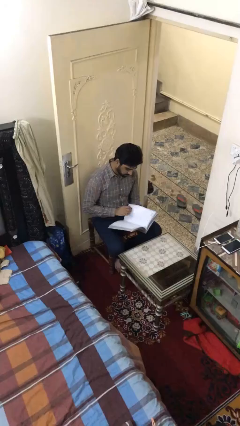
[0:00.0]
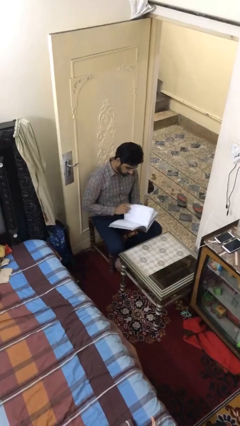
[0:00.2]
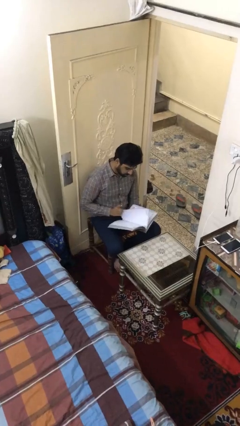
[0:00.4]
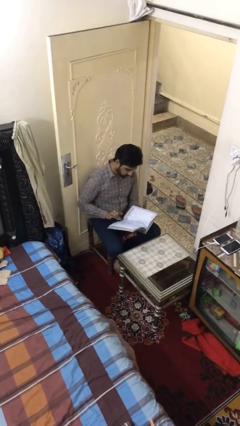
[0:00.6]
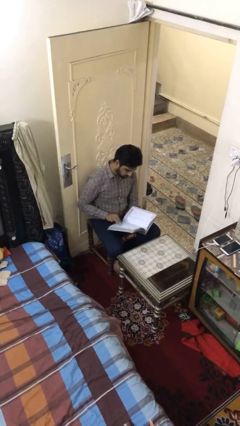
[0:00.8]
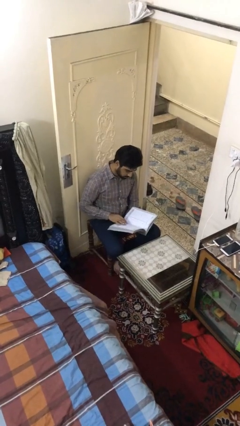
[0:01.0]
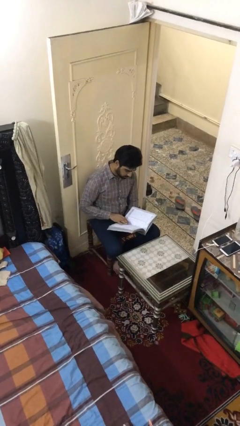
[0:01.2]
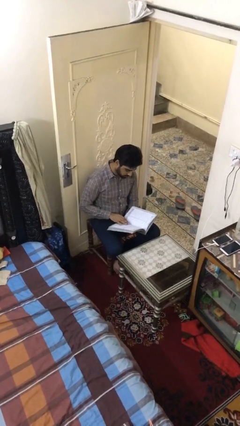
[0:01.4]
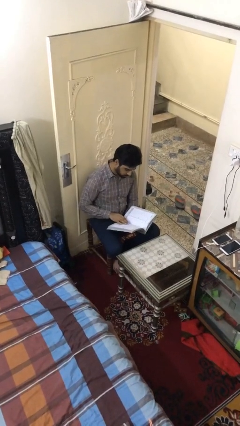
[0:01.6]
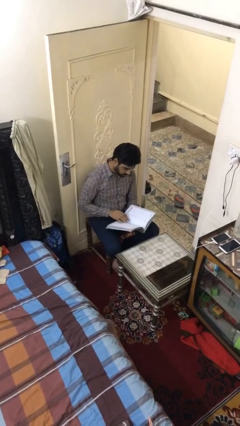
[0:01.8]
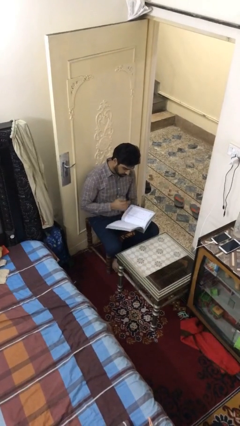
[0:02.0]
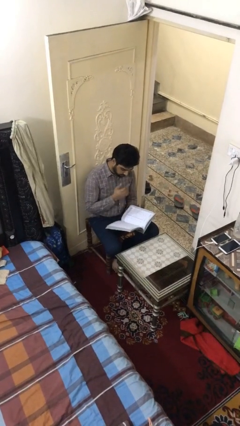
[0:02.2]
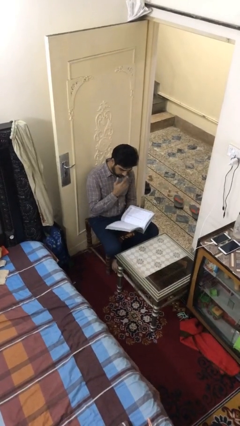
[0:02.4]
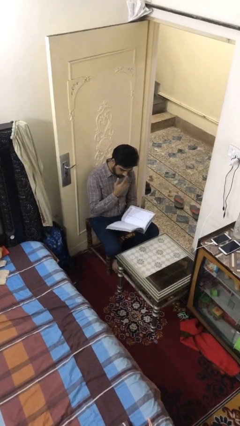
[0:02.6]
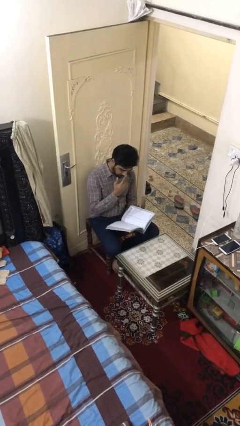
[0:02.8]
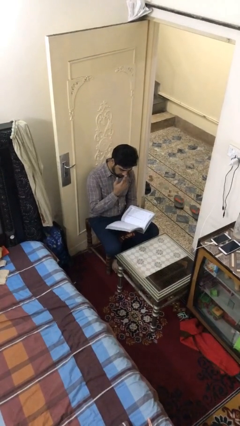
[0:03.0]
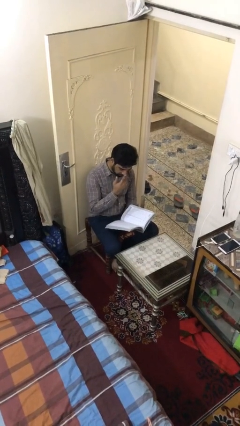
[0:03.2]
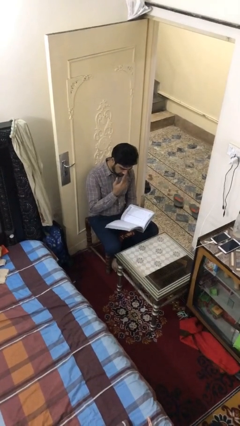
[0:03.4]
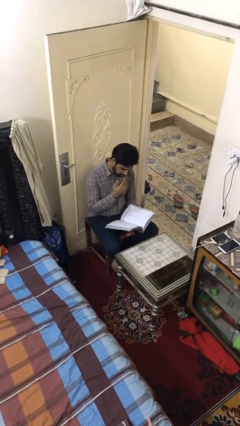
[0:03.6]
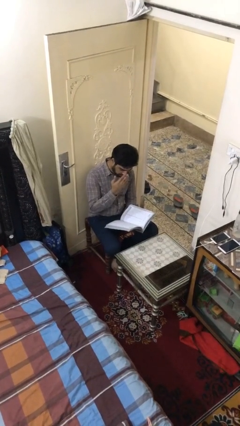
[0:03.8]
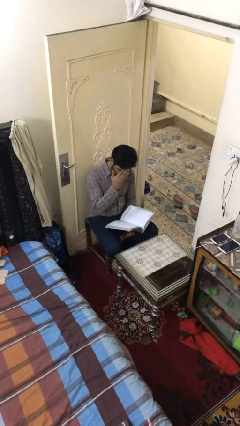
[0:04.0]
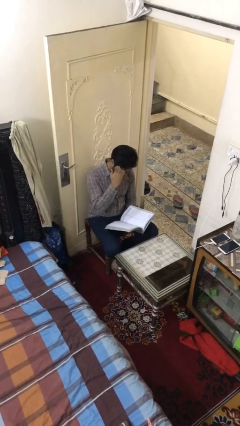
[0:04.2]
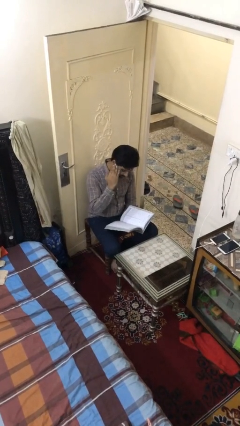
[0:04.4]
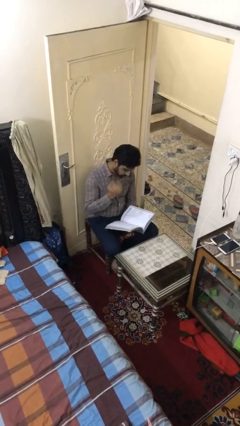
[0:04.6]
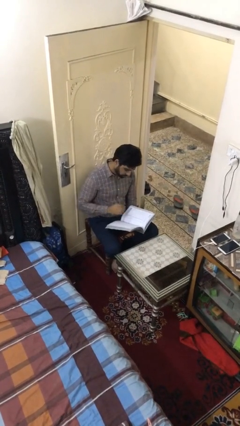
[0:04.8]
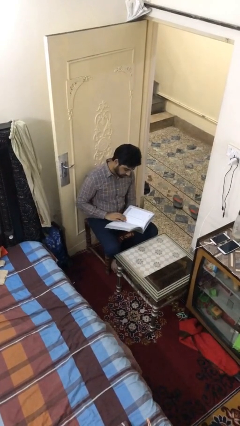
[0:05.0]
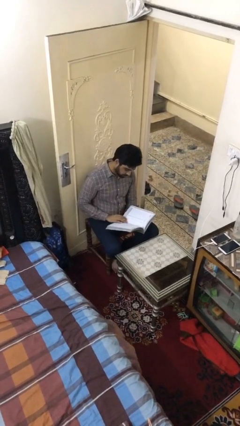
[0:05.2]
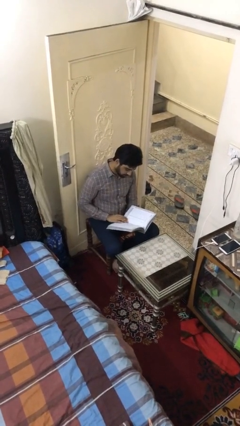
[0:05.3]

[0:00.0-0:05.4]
person reads document

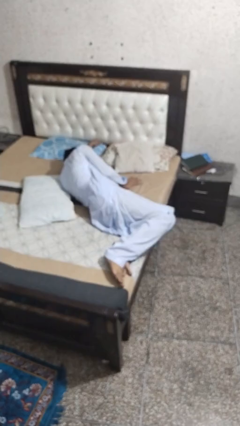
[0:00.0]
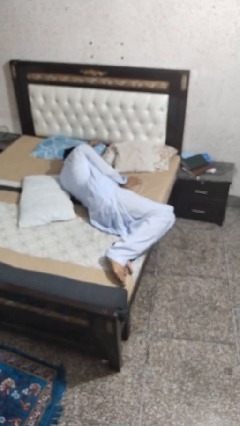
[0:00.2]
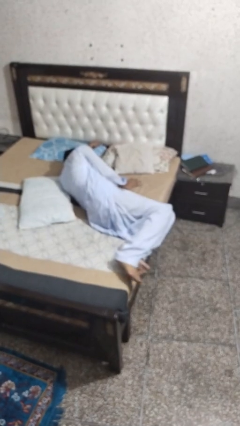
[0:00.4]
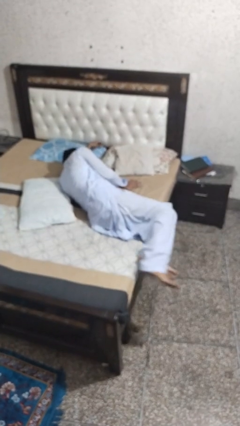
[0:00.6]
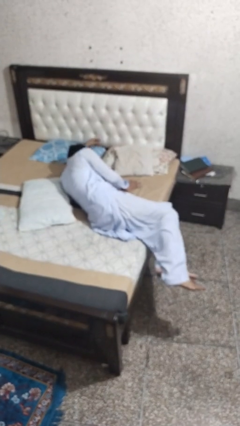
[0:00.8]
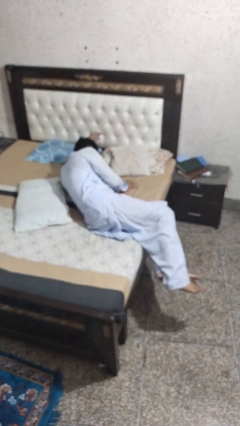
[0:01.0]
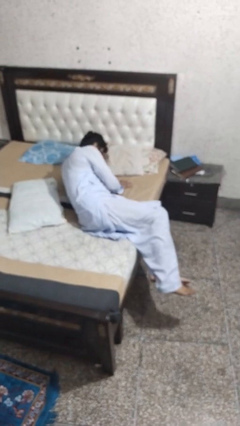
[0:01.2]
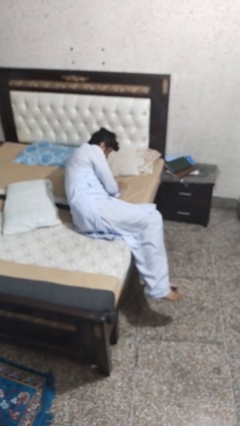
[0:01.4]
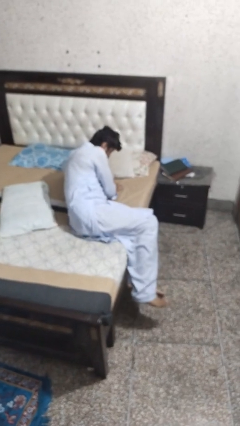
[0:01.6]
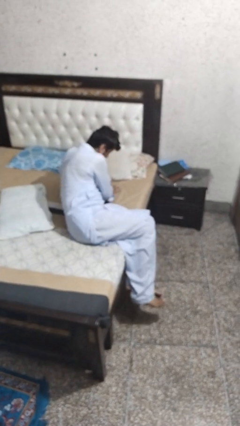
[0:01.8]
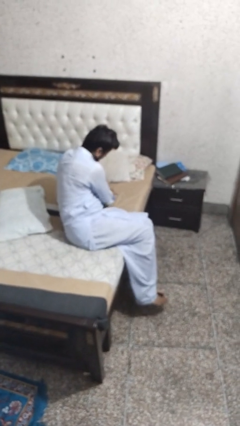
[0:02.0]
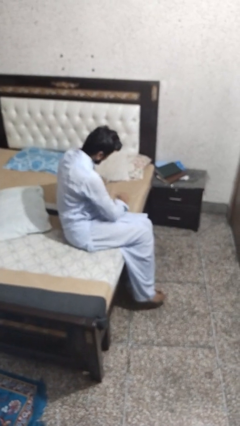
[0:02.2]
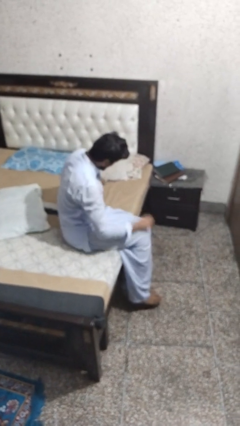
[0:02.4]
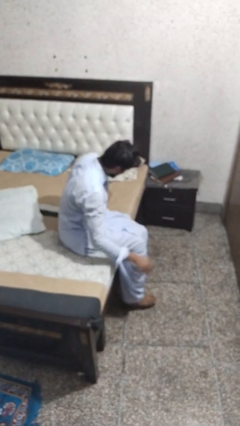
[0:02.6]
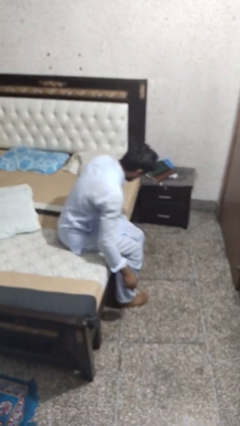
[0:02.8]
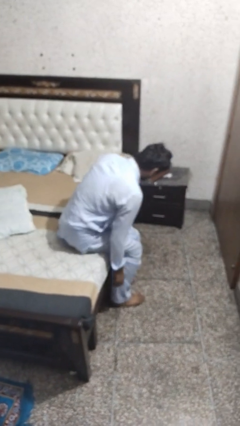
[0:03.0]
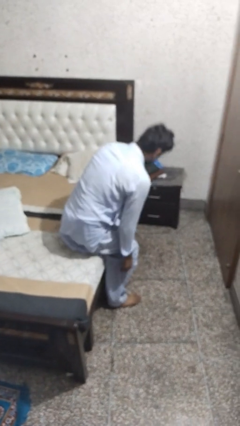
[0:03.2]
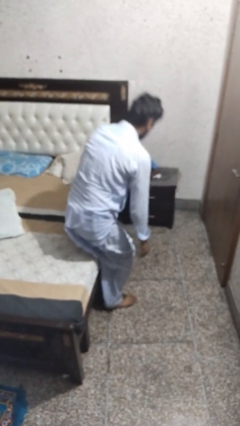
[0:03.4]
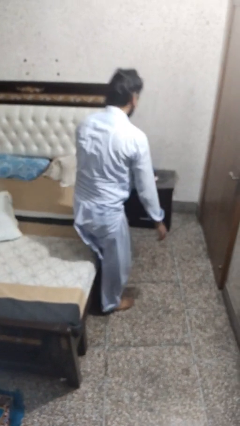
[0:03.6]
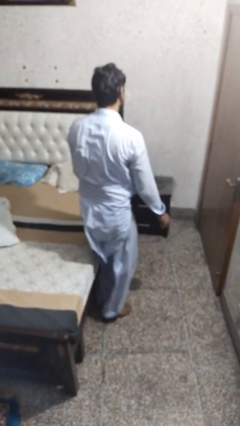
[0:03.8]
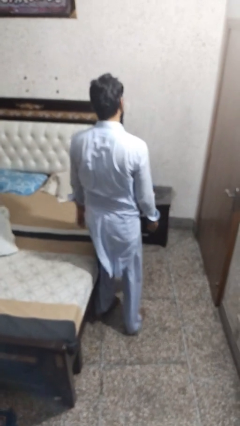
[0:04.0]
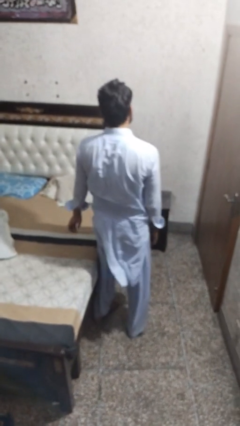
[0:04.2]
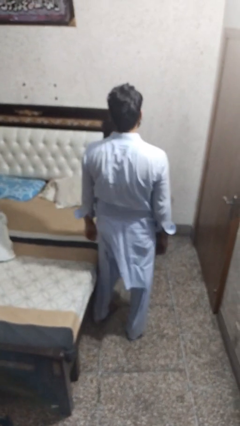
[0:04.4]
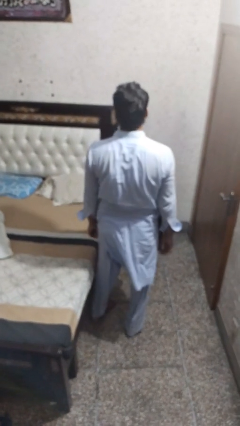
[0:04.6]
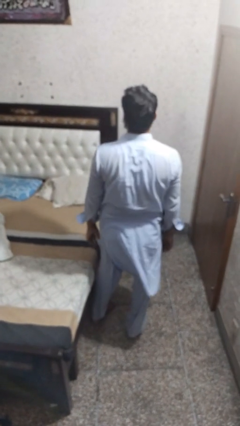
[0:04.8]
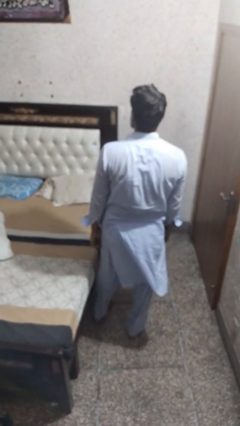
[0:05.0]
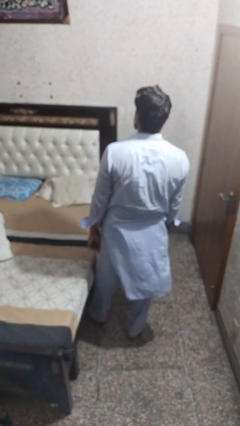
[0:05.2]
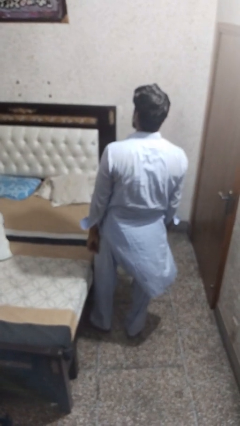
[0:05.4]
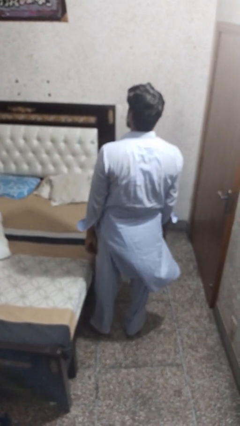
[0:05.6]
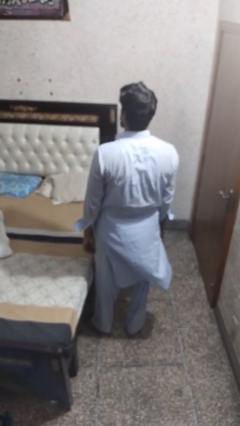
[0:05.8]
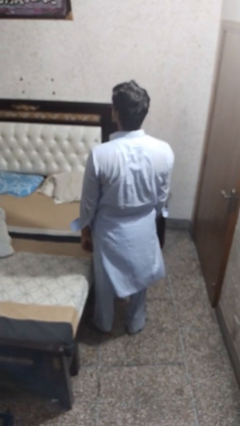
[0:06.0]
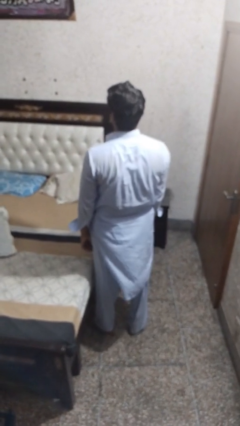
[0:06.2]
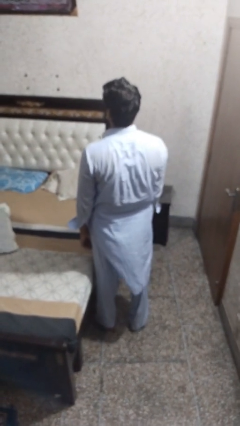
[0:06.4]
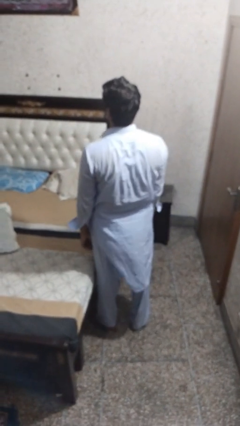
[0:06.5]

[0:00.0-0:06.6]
person stands up

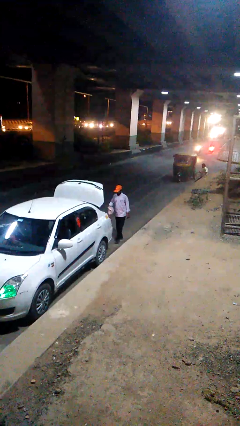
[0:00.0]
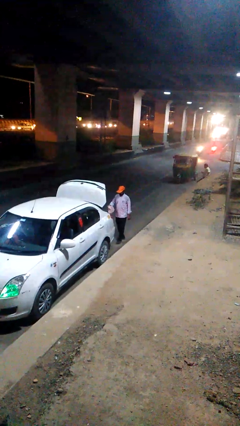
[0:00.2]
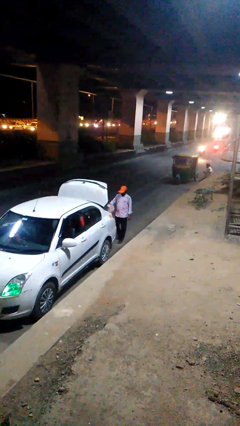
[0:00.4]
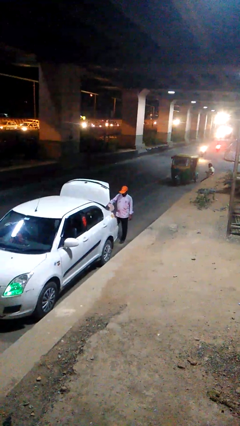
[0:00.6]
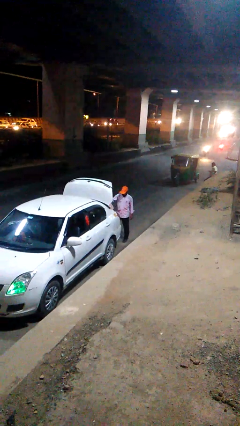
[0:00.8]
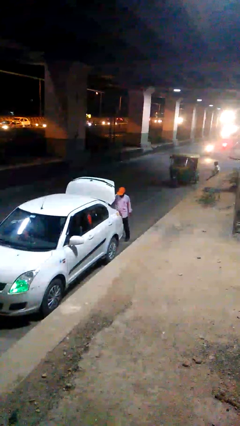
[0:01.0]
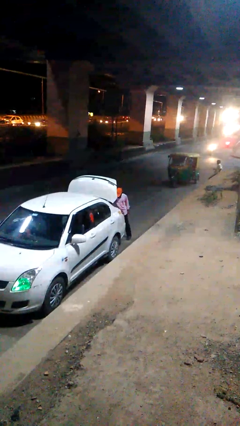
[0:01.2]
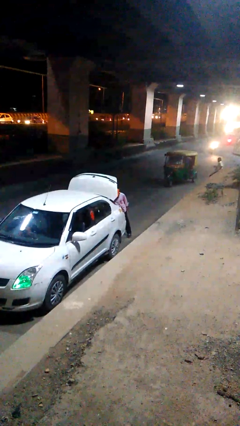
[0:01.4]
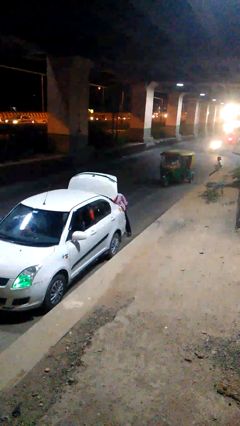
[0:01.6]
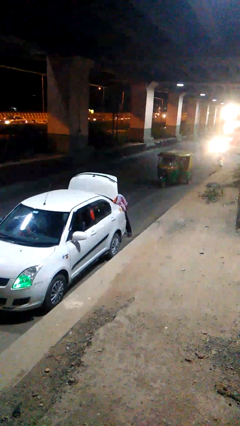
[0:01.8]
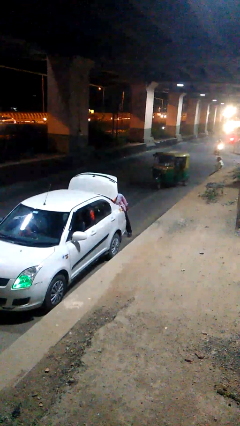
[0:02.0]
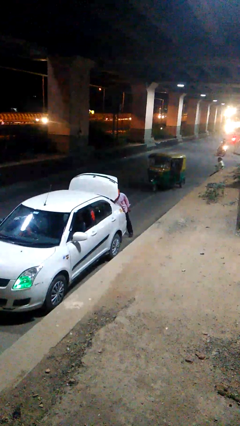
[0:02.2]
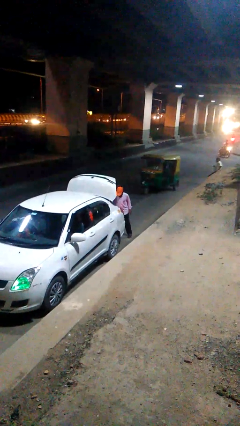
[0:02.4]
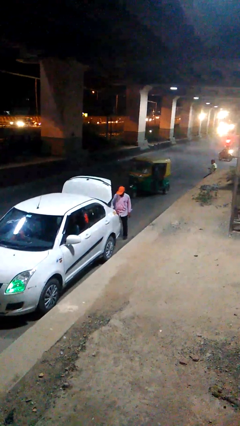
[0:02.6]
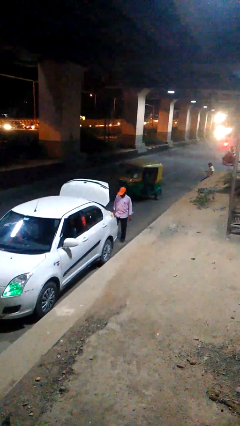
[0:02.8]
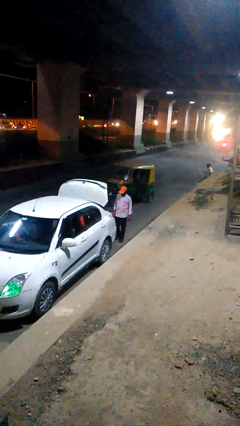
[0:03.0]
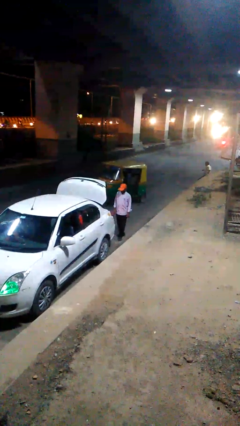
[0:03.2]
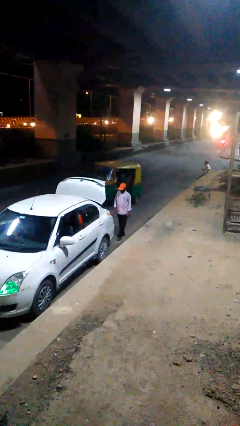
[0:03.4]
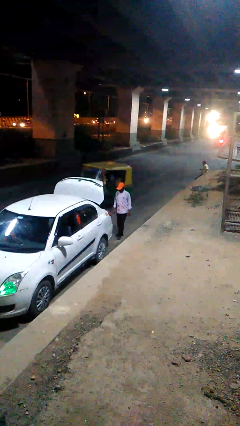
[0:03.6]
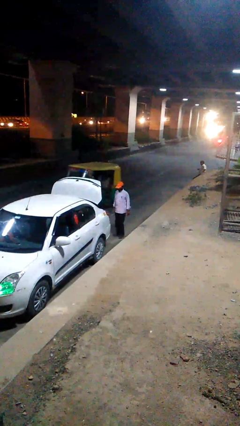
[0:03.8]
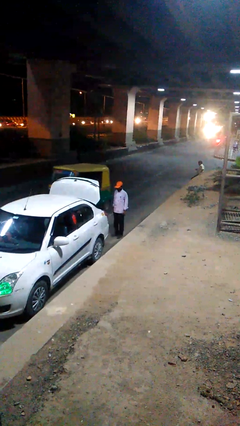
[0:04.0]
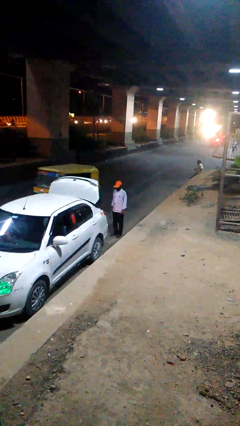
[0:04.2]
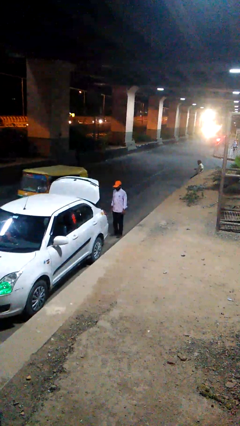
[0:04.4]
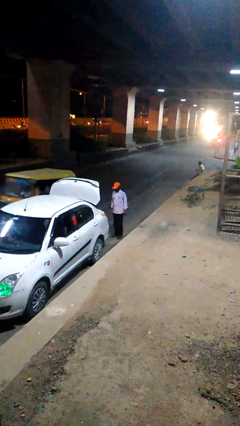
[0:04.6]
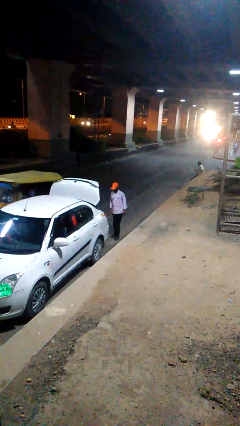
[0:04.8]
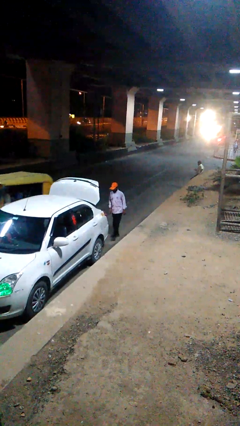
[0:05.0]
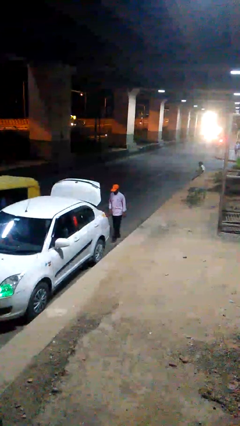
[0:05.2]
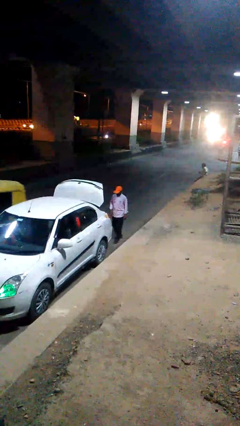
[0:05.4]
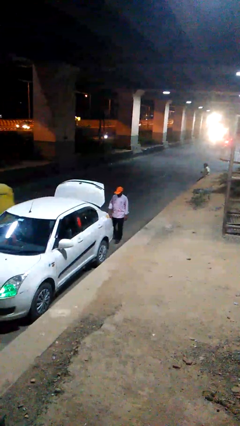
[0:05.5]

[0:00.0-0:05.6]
person loads car

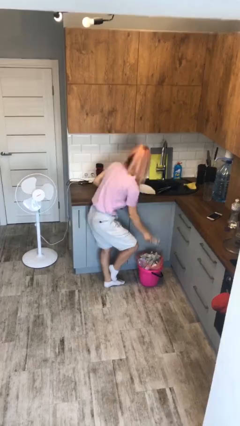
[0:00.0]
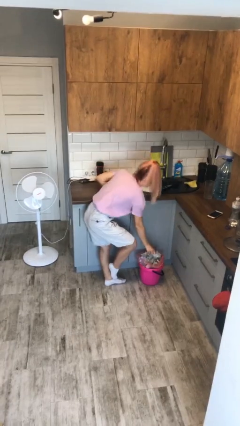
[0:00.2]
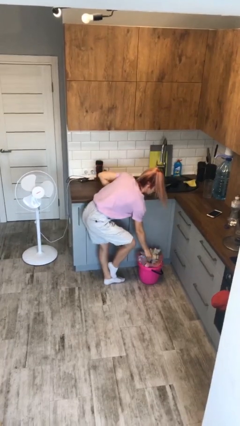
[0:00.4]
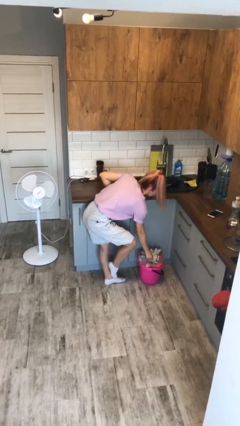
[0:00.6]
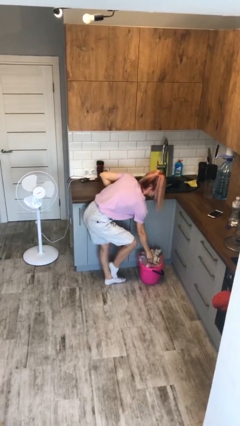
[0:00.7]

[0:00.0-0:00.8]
person discards trash
